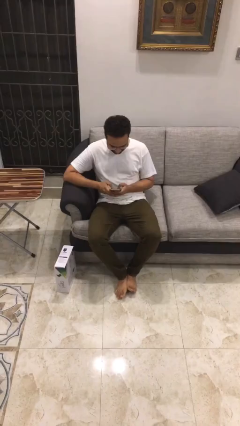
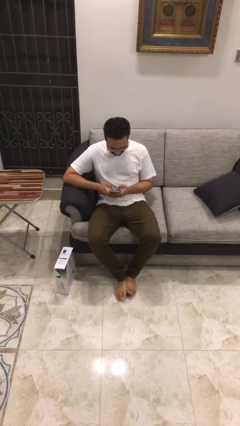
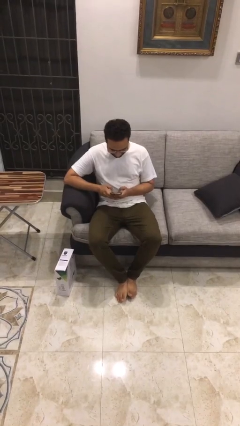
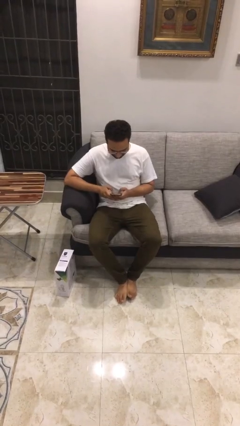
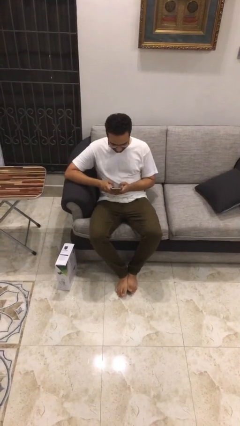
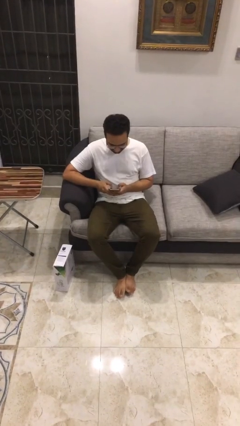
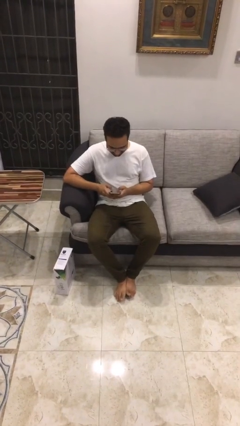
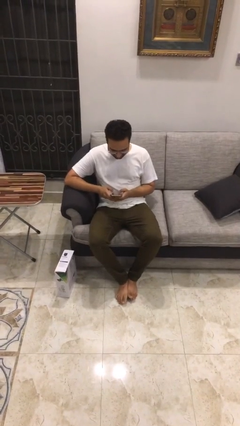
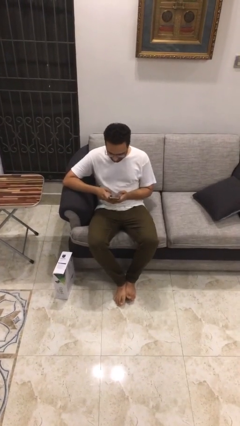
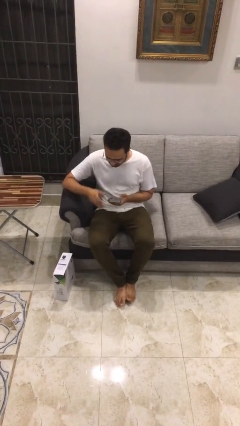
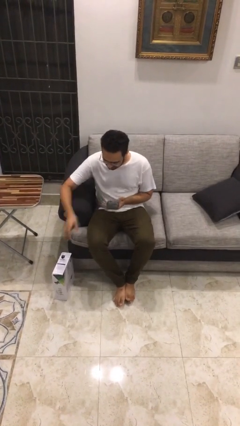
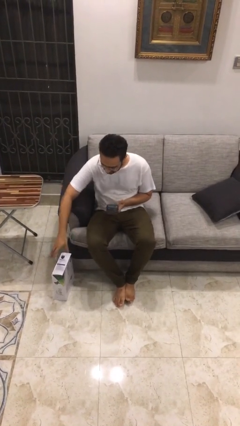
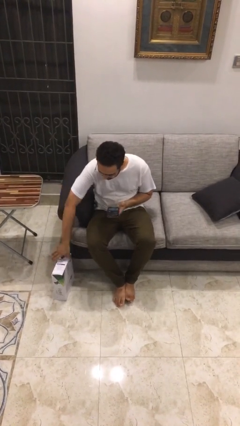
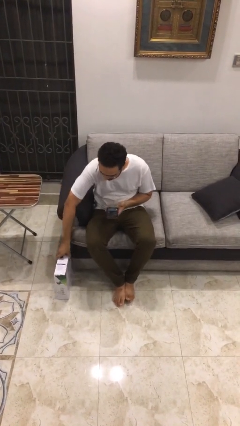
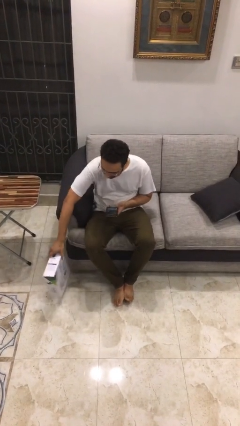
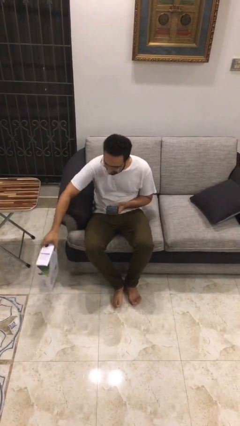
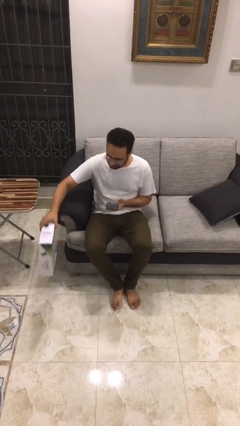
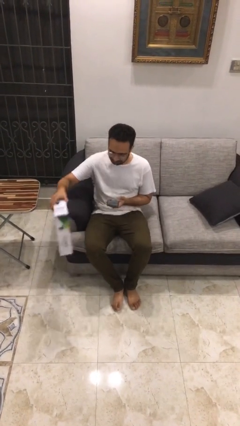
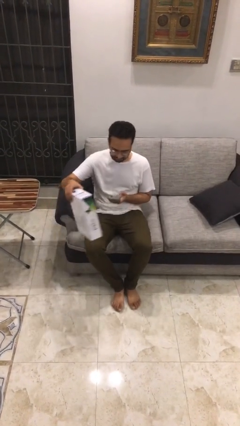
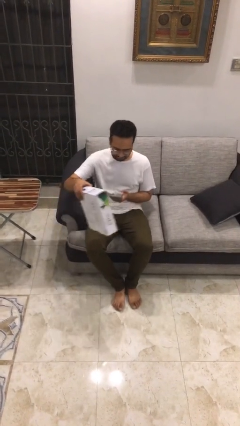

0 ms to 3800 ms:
person picks up object from floor

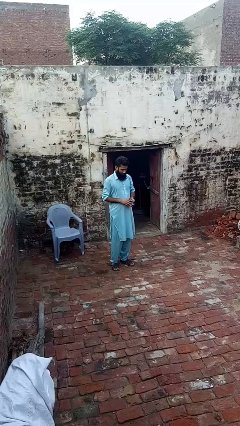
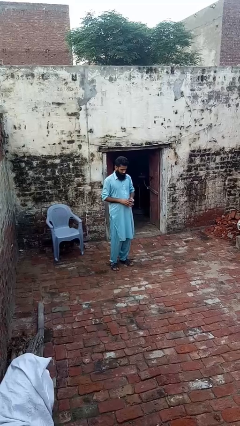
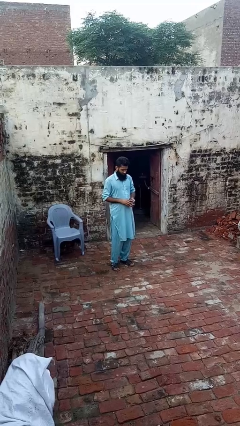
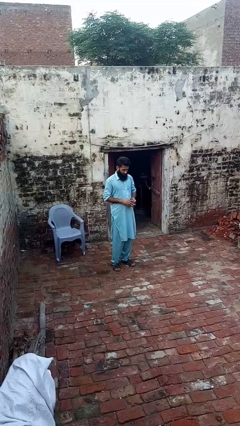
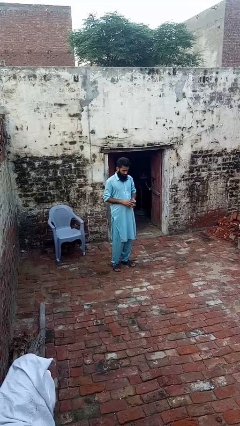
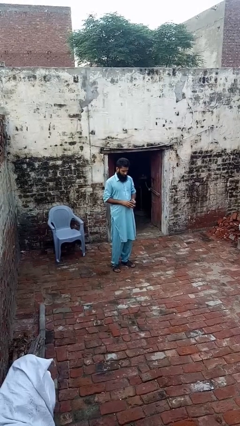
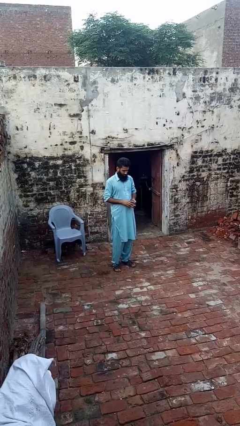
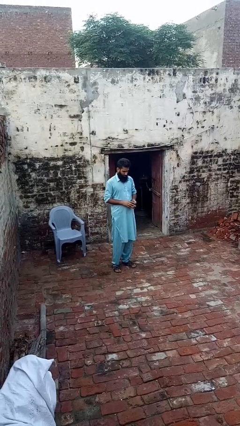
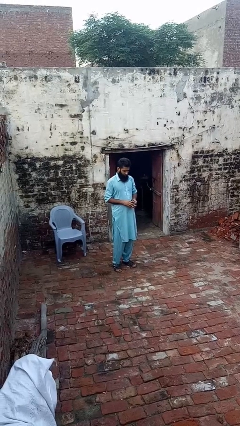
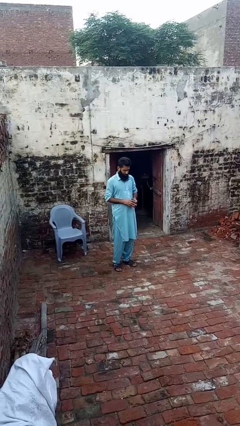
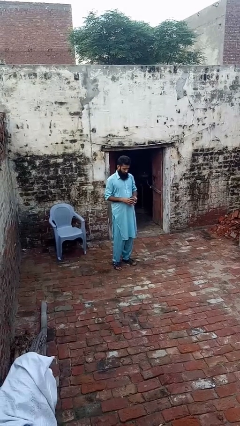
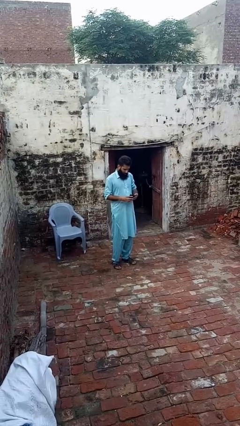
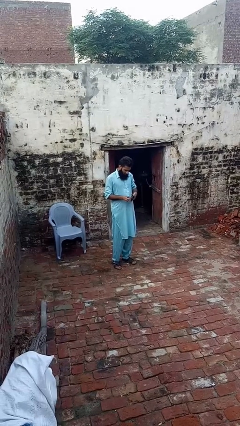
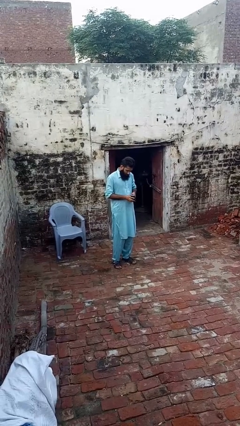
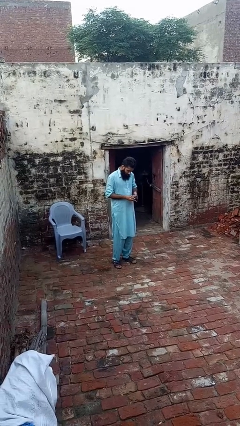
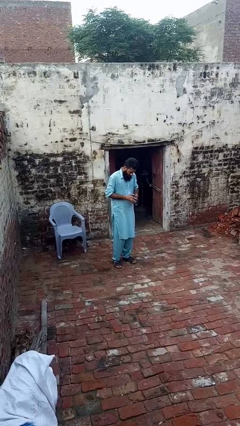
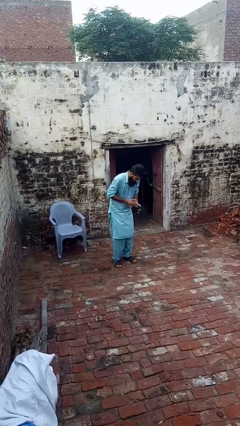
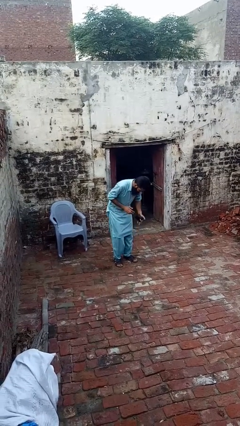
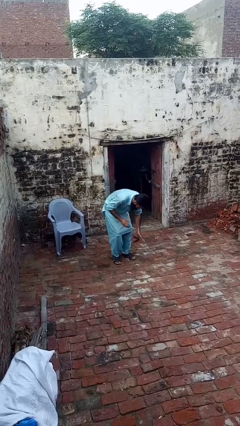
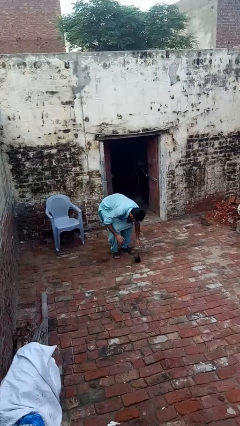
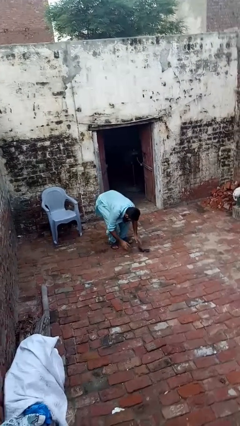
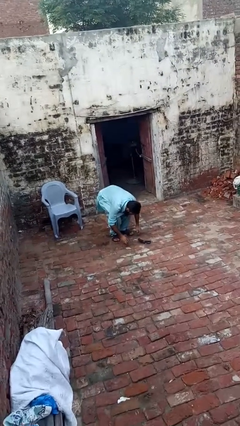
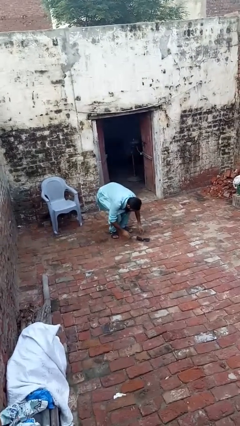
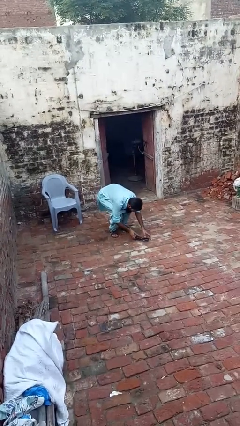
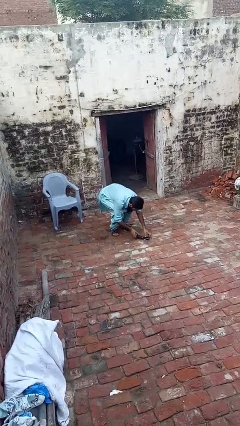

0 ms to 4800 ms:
person drops object

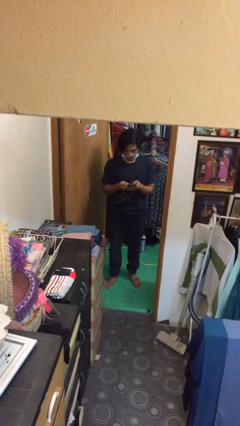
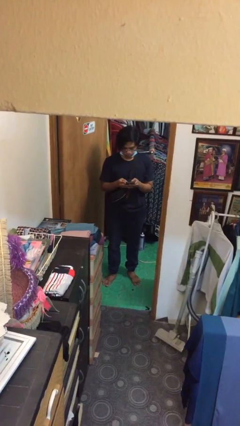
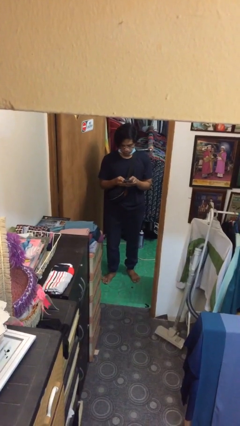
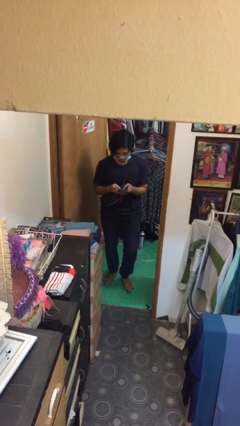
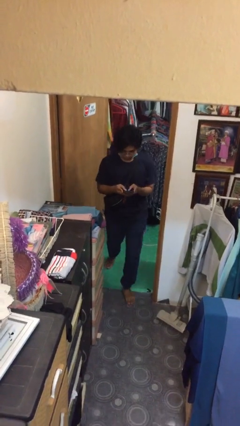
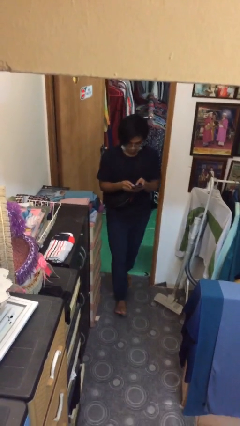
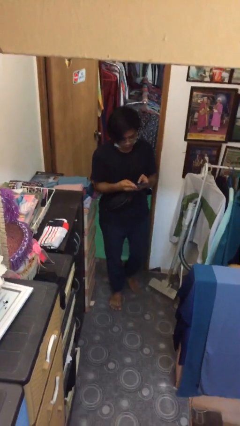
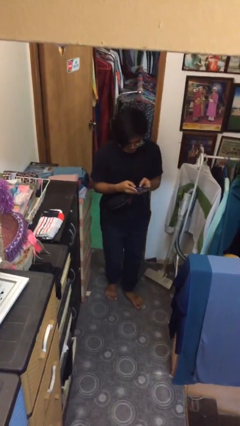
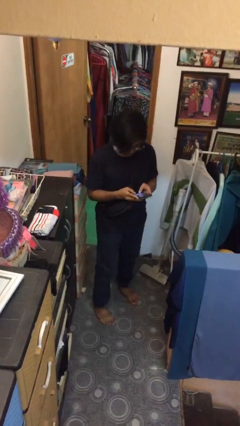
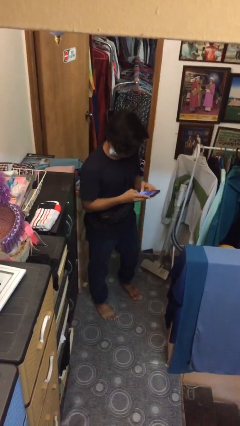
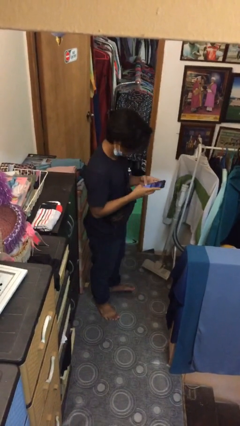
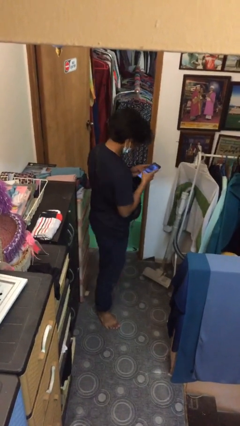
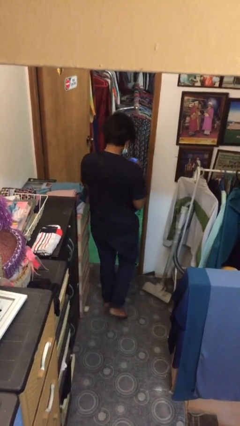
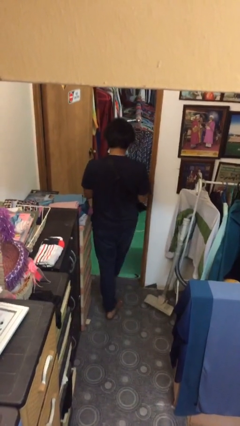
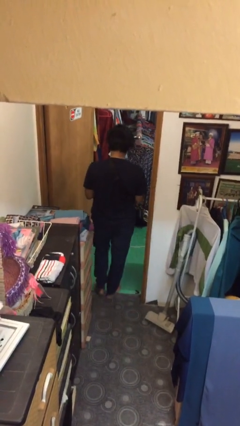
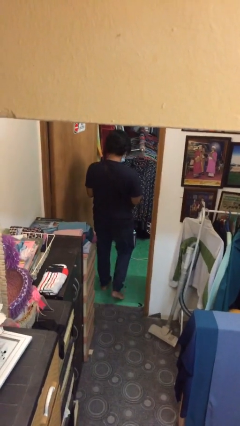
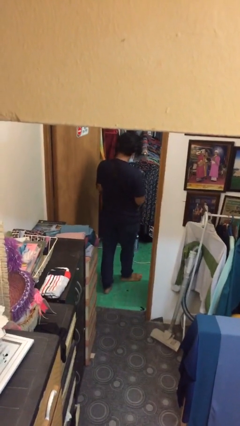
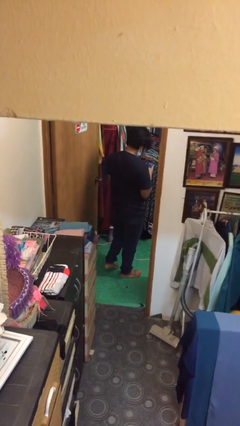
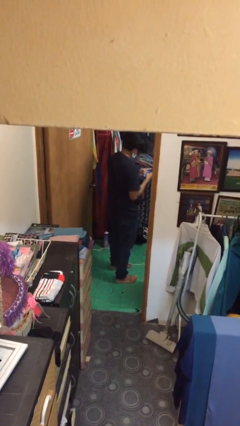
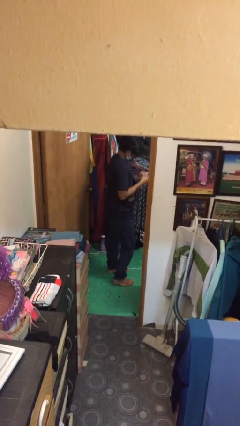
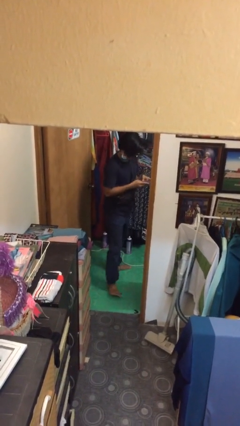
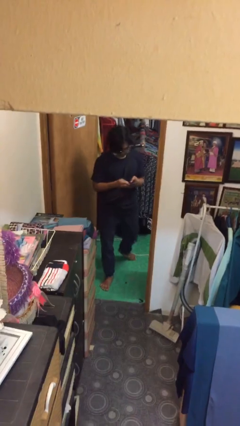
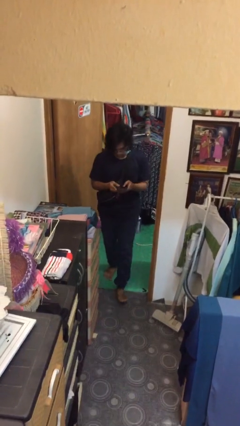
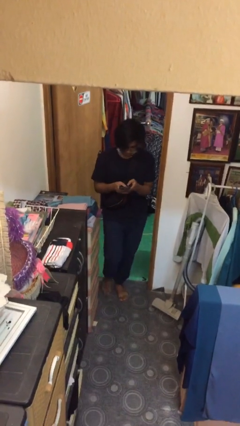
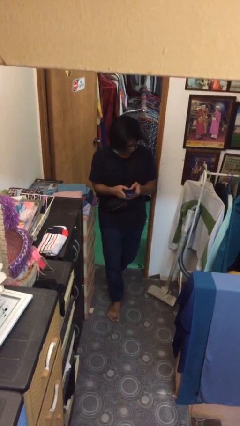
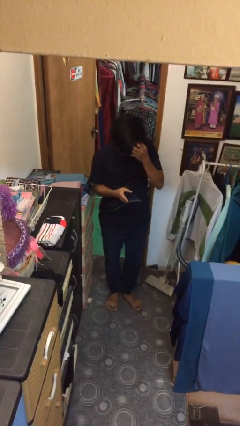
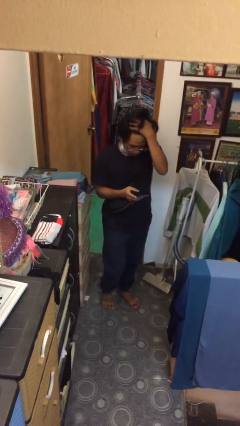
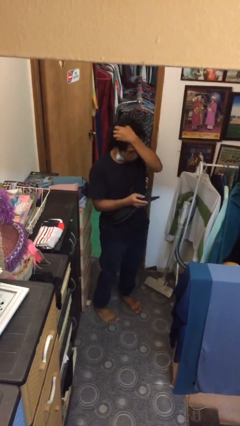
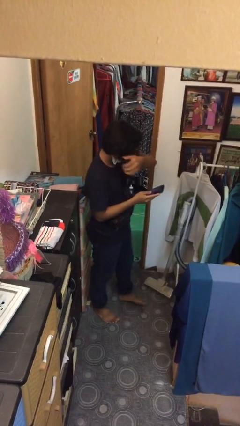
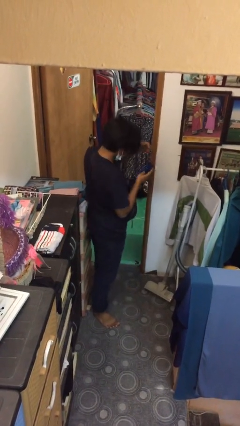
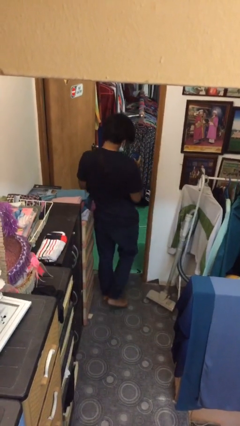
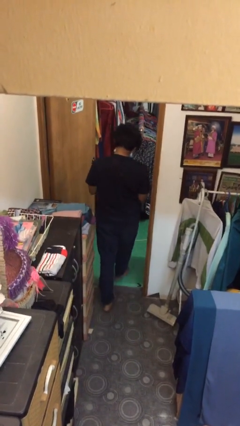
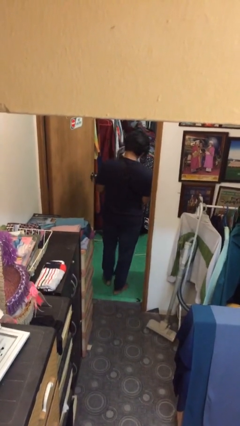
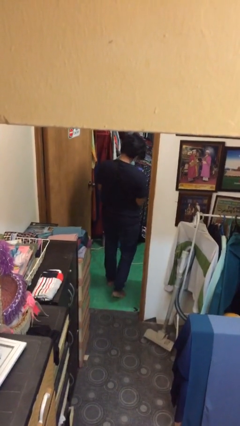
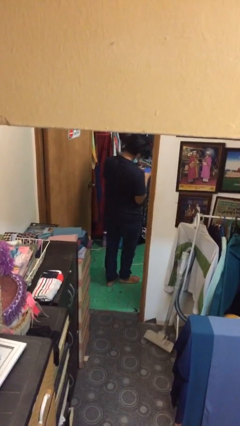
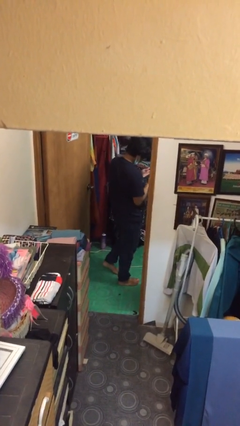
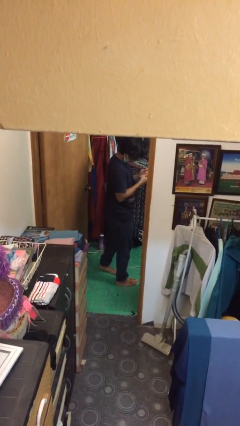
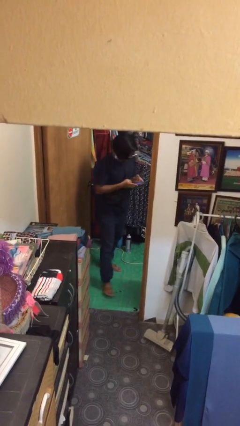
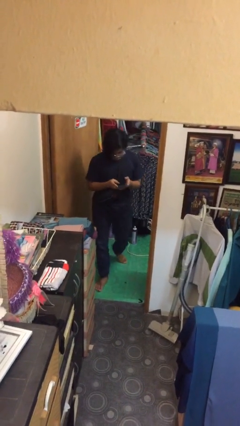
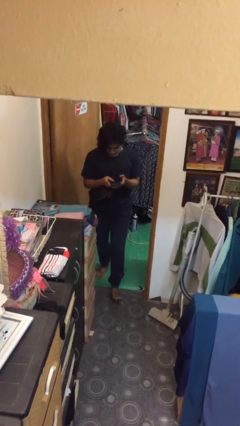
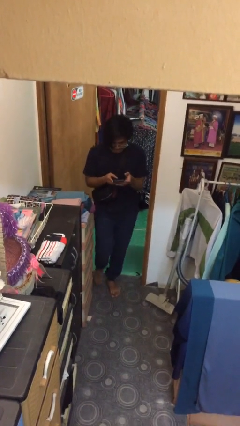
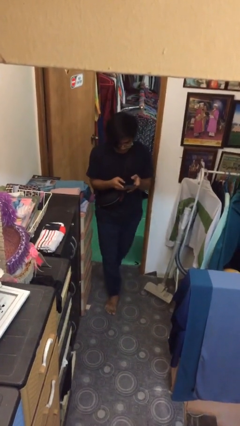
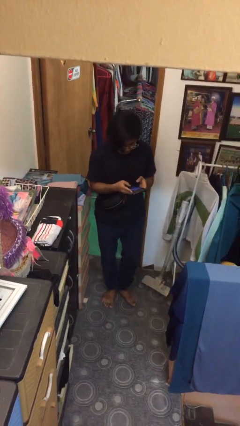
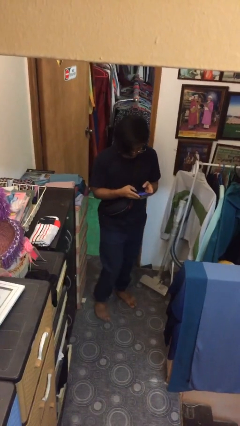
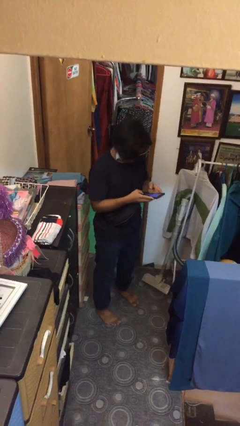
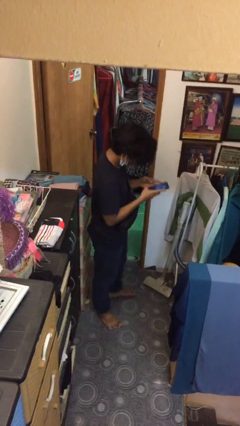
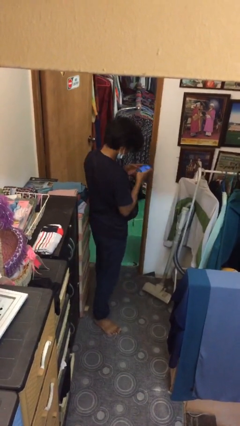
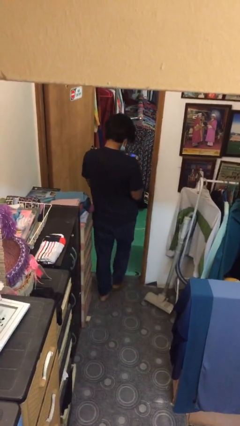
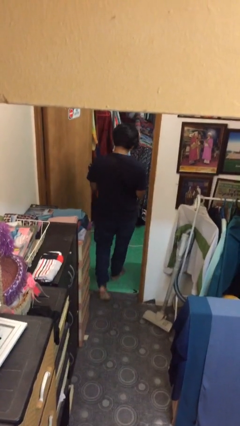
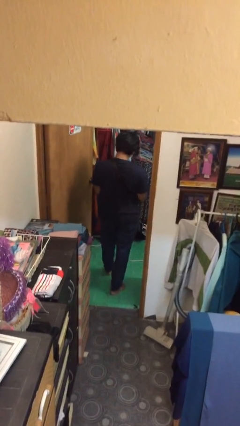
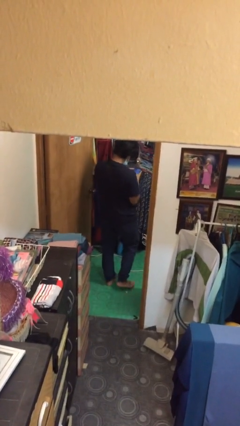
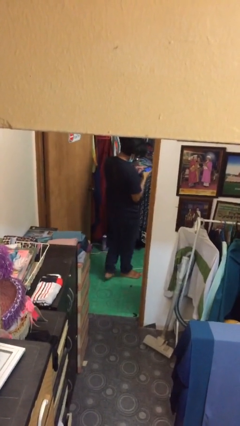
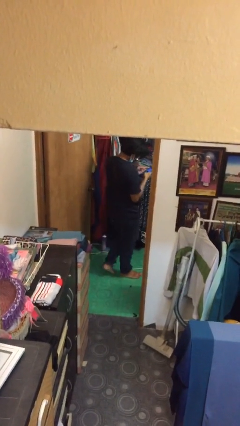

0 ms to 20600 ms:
person texts on phone
